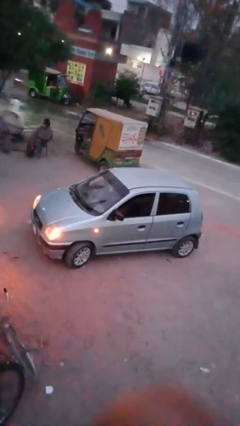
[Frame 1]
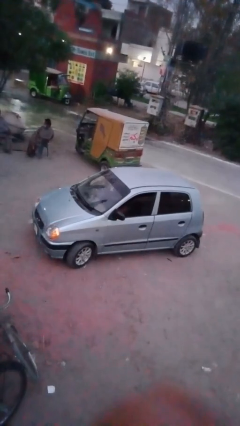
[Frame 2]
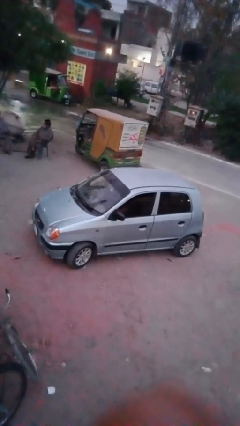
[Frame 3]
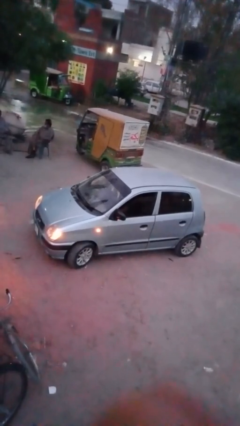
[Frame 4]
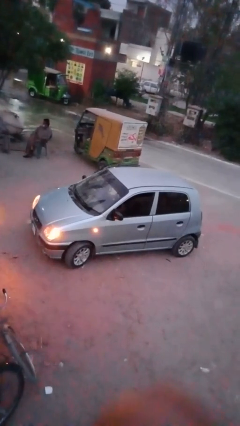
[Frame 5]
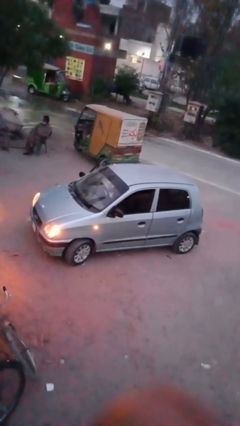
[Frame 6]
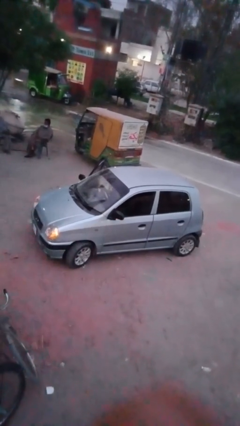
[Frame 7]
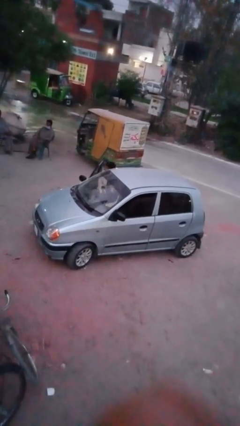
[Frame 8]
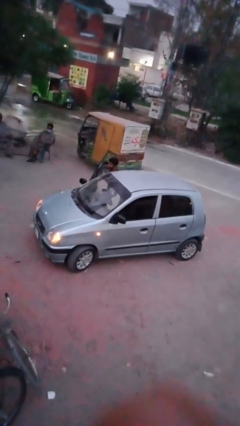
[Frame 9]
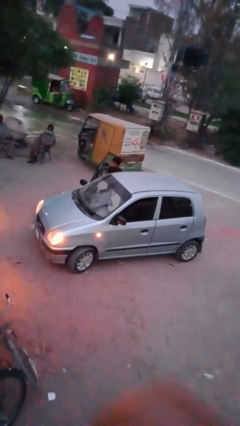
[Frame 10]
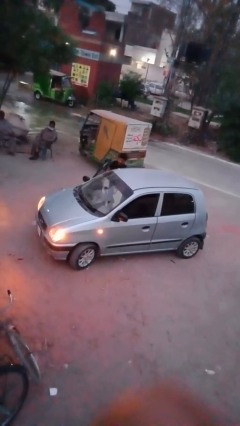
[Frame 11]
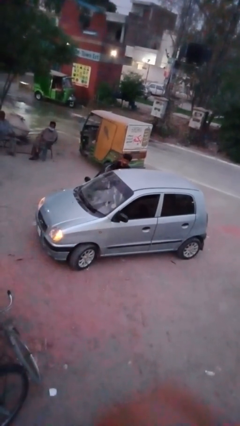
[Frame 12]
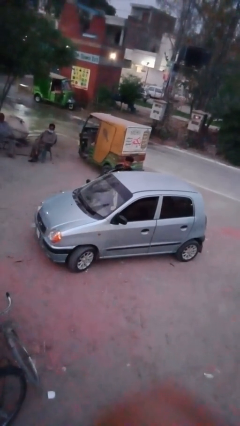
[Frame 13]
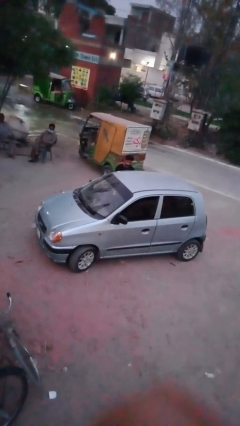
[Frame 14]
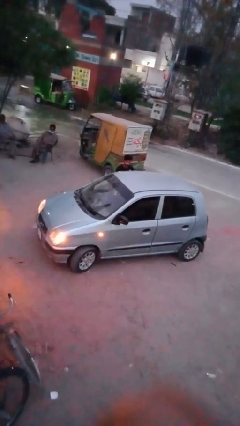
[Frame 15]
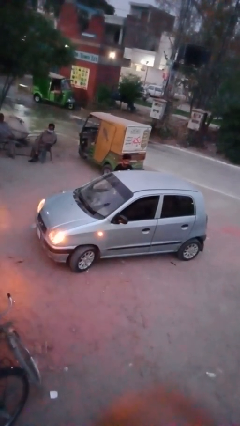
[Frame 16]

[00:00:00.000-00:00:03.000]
car drops off person

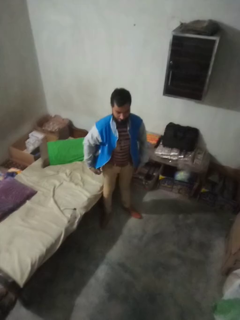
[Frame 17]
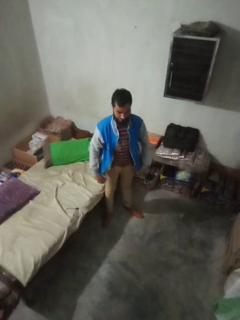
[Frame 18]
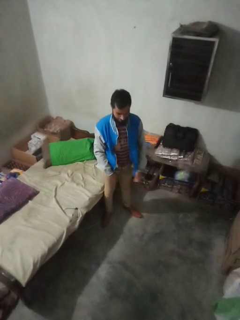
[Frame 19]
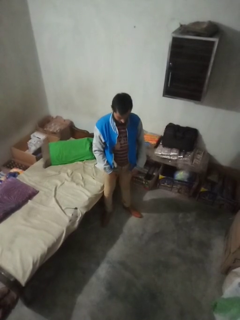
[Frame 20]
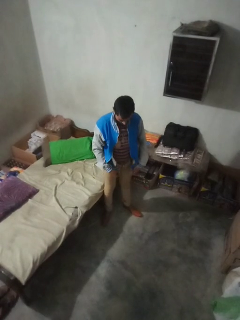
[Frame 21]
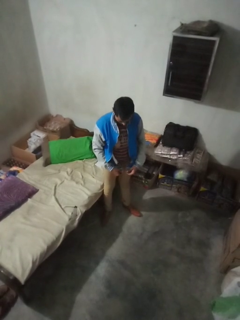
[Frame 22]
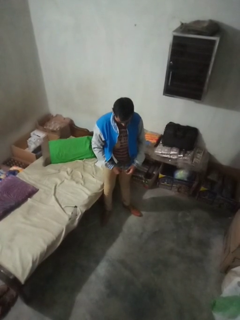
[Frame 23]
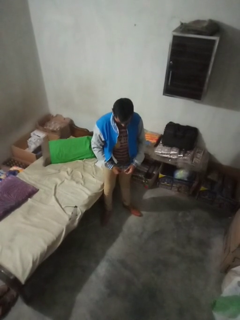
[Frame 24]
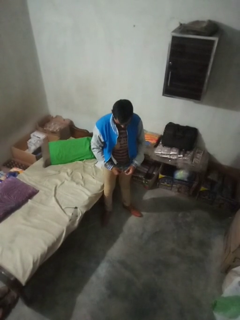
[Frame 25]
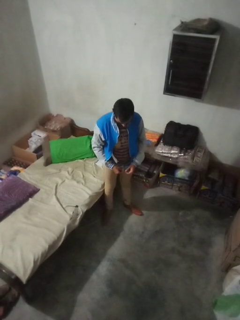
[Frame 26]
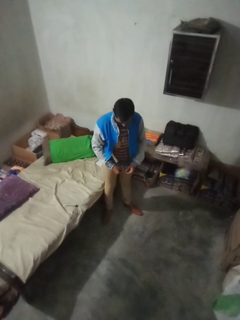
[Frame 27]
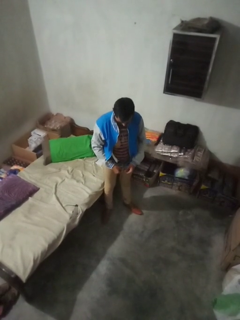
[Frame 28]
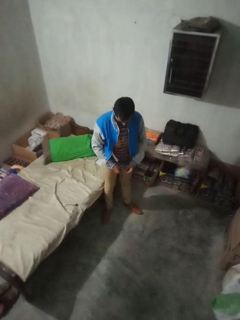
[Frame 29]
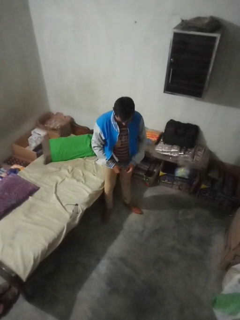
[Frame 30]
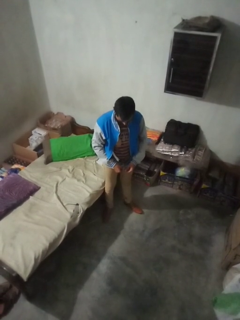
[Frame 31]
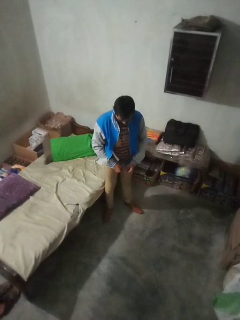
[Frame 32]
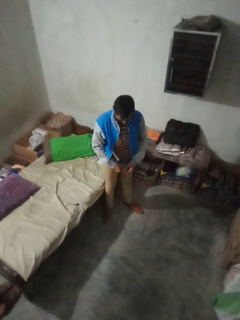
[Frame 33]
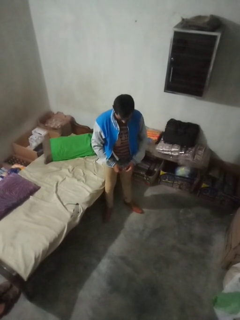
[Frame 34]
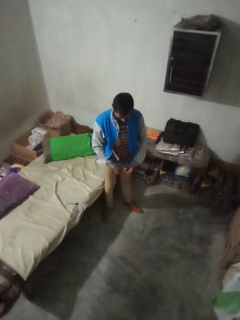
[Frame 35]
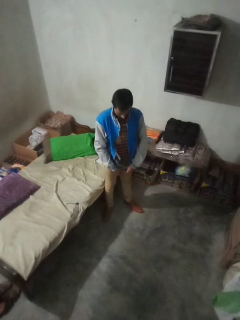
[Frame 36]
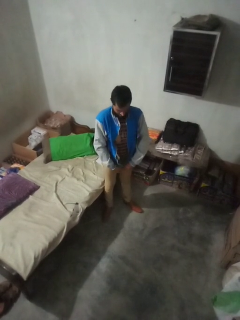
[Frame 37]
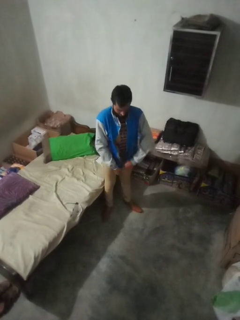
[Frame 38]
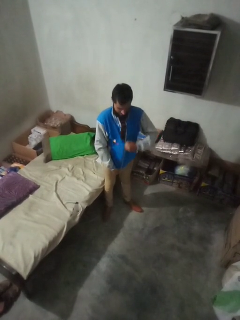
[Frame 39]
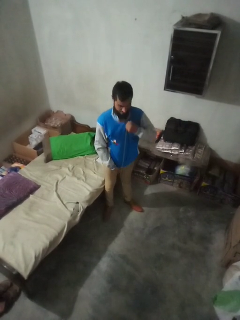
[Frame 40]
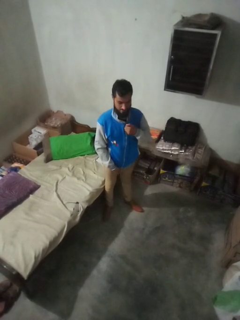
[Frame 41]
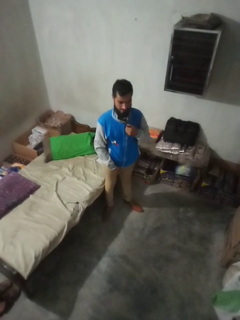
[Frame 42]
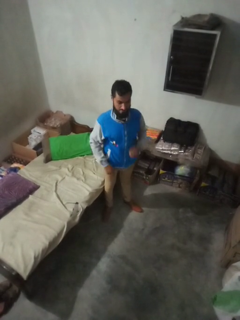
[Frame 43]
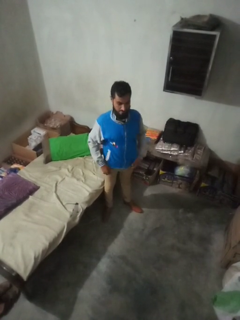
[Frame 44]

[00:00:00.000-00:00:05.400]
person zips up jacket

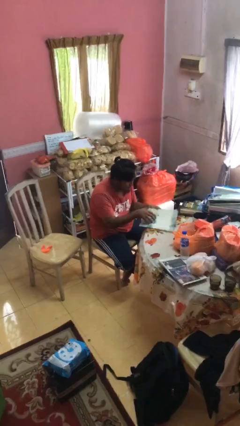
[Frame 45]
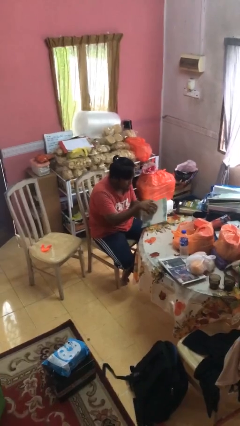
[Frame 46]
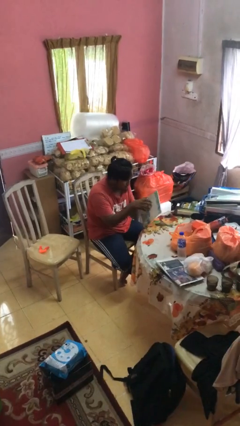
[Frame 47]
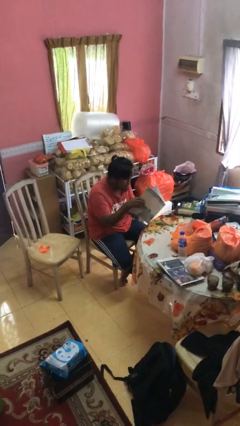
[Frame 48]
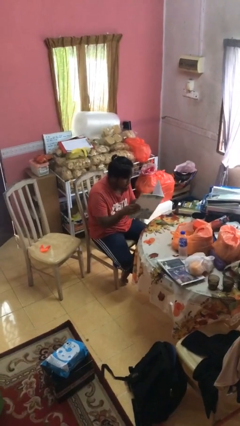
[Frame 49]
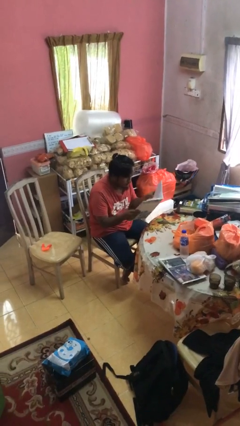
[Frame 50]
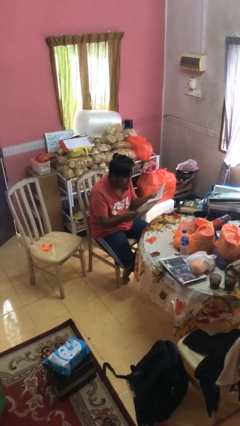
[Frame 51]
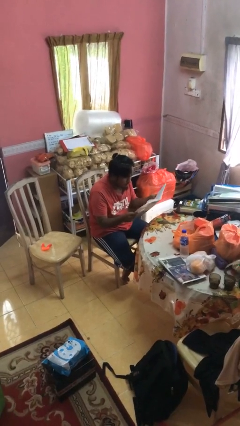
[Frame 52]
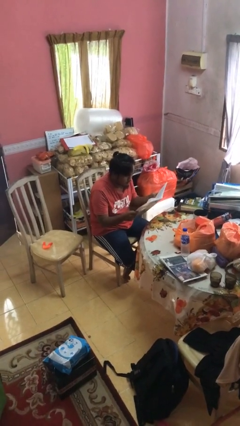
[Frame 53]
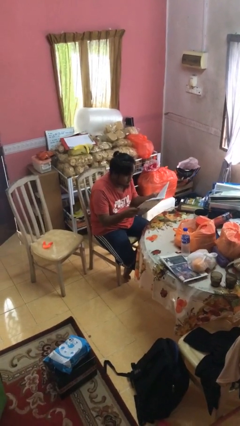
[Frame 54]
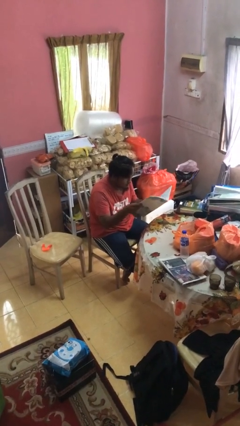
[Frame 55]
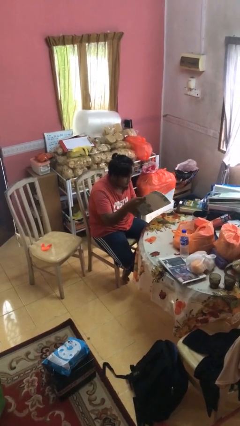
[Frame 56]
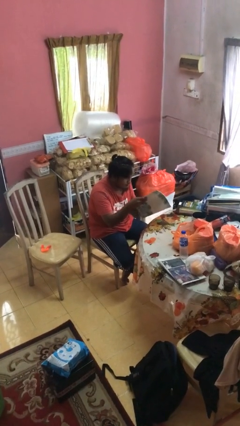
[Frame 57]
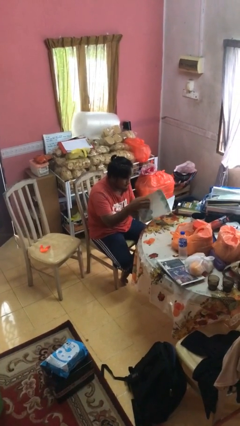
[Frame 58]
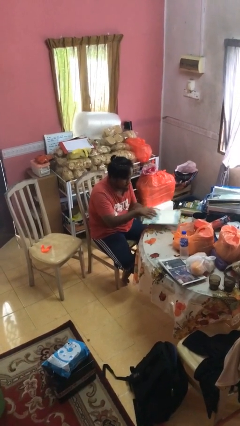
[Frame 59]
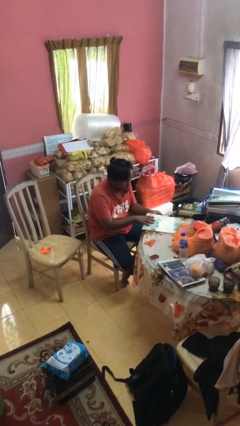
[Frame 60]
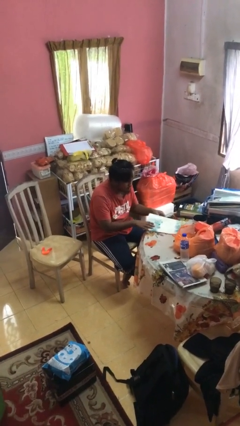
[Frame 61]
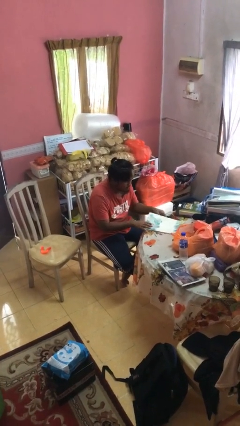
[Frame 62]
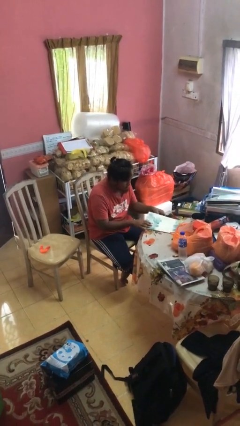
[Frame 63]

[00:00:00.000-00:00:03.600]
person reads magazine

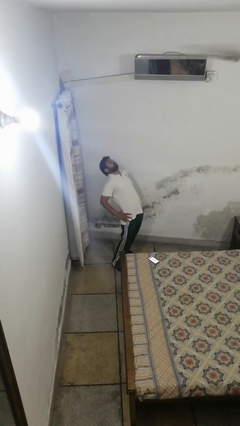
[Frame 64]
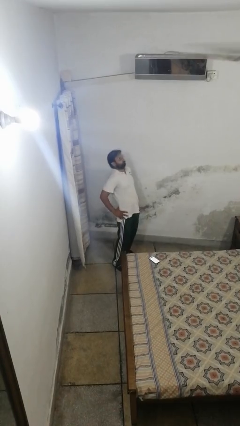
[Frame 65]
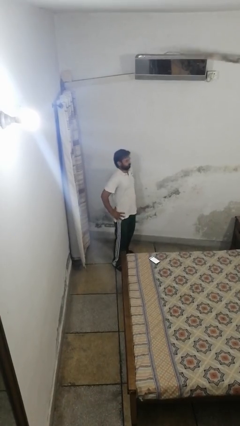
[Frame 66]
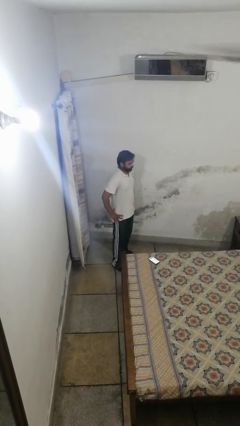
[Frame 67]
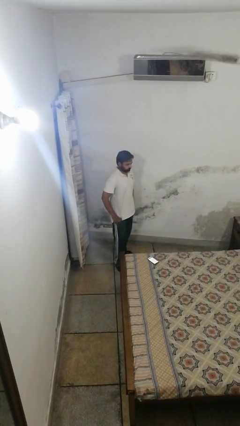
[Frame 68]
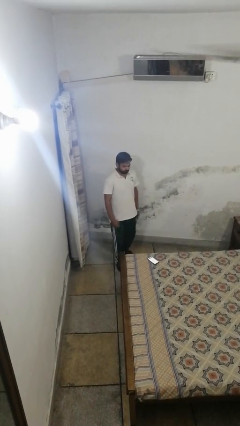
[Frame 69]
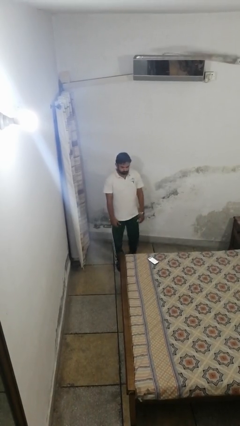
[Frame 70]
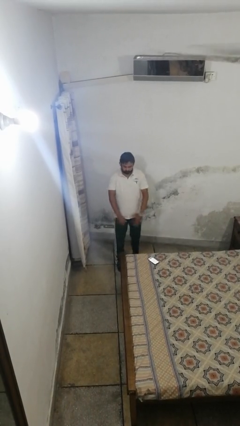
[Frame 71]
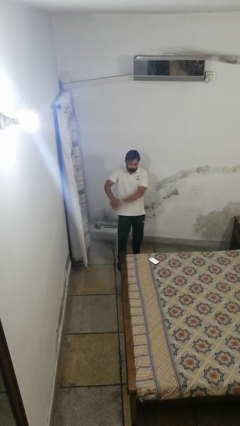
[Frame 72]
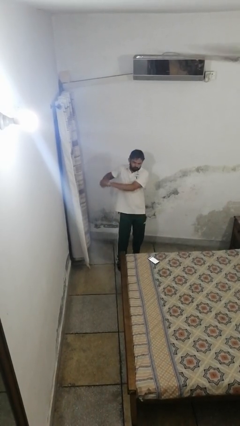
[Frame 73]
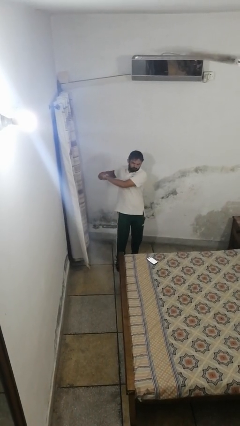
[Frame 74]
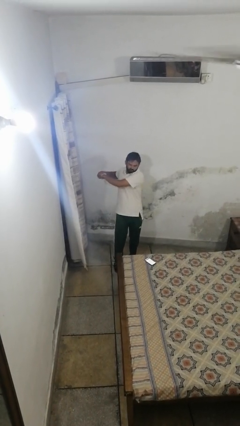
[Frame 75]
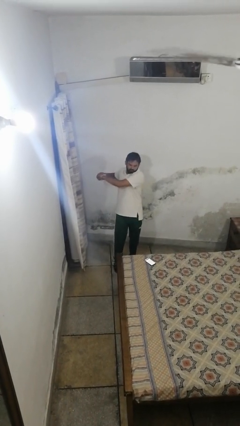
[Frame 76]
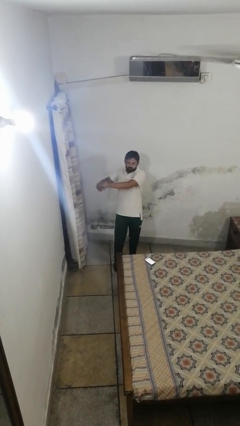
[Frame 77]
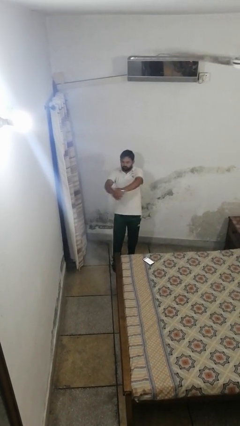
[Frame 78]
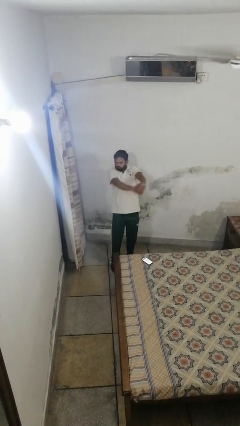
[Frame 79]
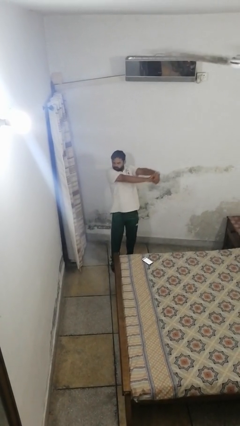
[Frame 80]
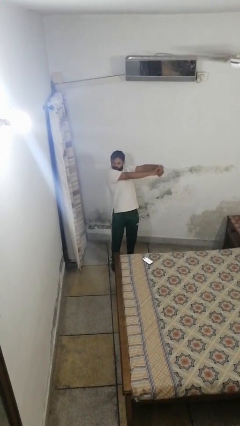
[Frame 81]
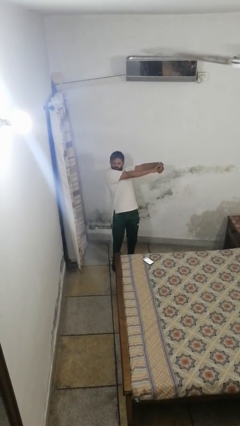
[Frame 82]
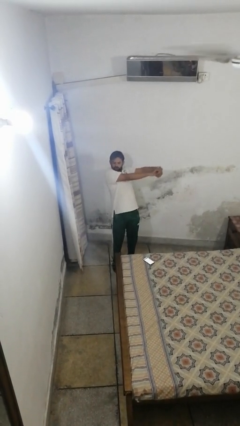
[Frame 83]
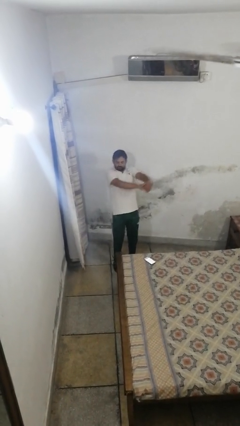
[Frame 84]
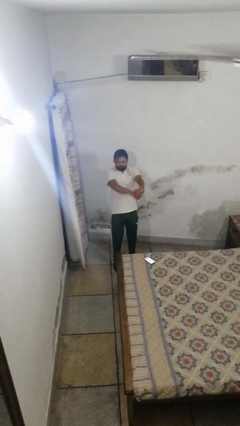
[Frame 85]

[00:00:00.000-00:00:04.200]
person stretches arms to side

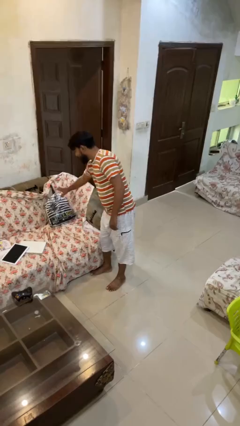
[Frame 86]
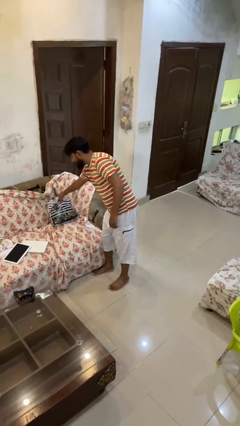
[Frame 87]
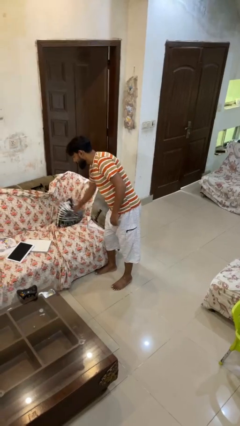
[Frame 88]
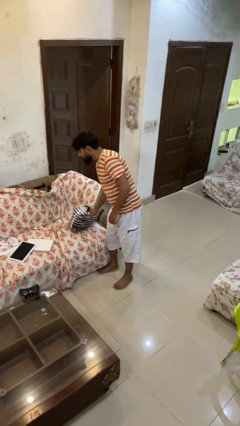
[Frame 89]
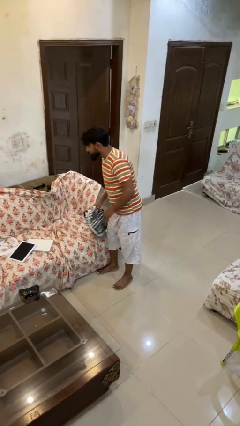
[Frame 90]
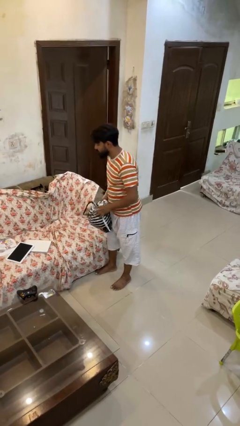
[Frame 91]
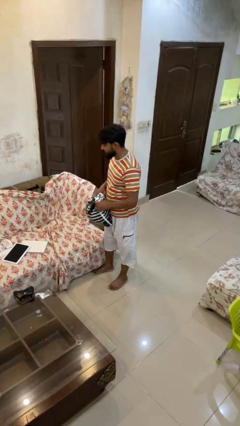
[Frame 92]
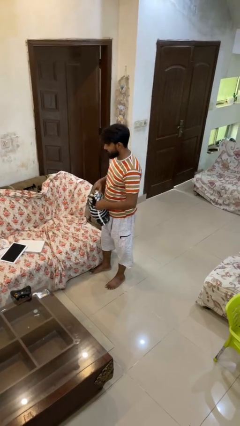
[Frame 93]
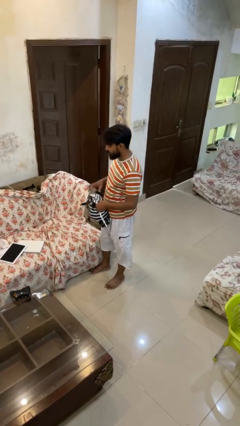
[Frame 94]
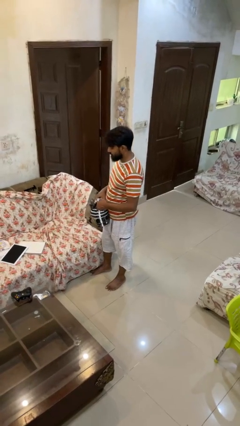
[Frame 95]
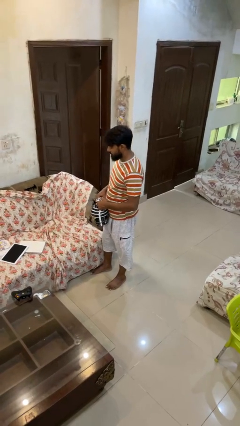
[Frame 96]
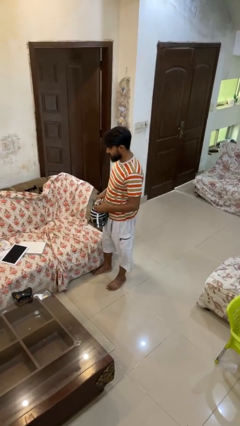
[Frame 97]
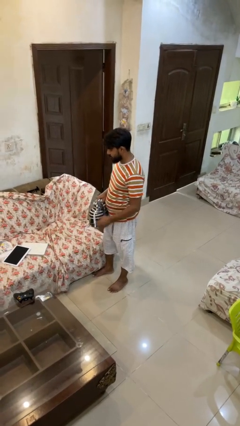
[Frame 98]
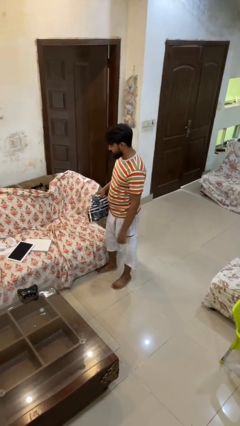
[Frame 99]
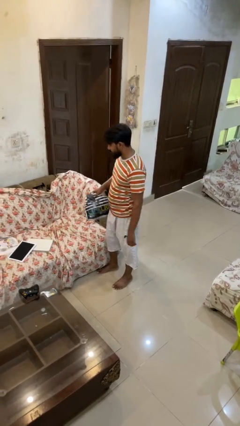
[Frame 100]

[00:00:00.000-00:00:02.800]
person picks up object from couch
